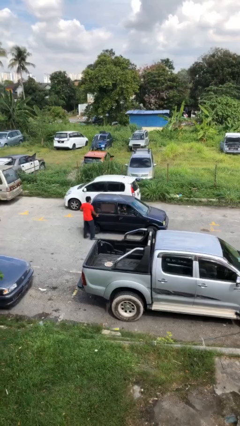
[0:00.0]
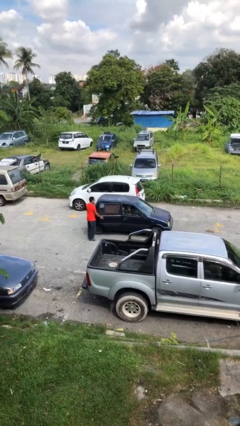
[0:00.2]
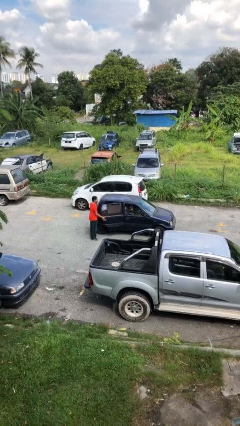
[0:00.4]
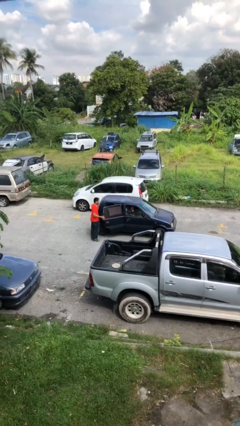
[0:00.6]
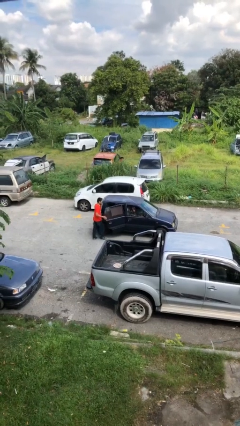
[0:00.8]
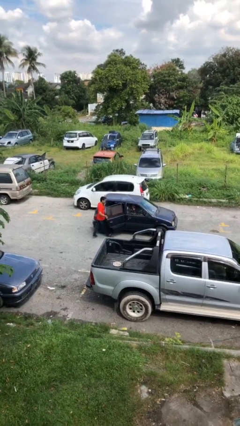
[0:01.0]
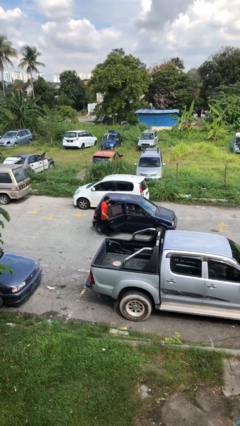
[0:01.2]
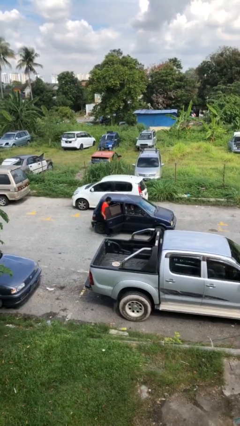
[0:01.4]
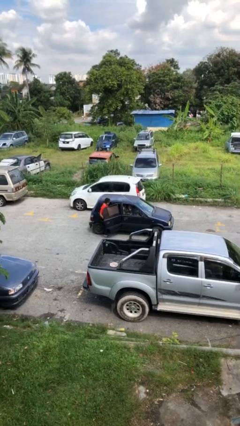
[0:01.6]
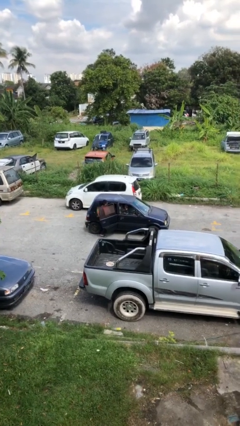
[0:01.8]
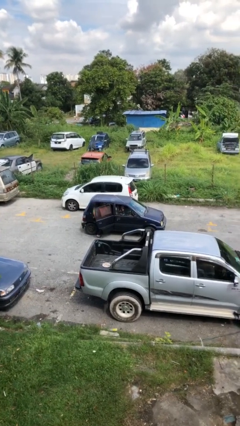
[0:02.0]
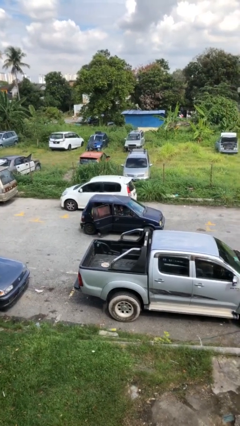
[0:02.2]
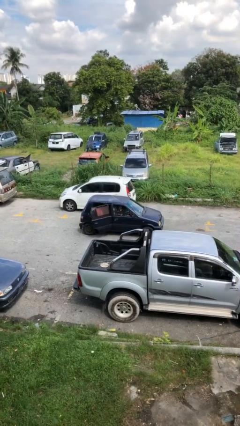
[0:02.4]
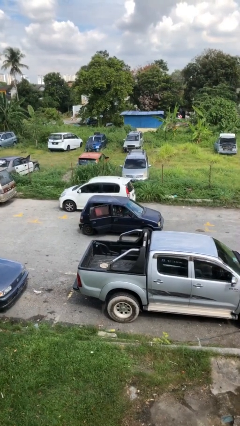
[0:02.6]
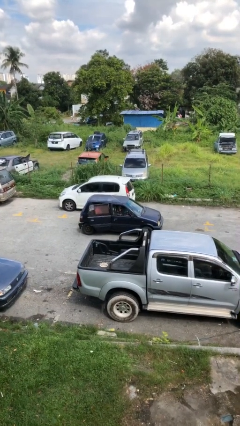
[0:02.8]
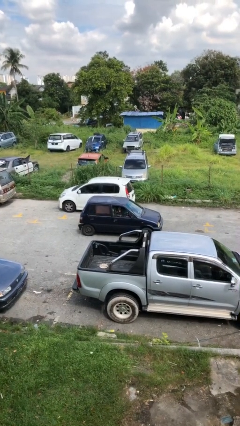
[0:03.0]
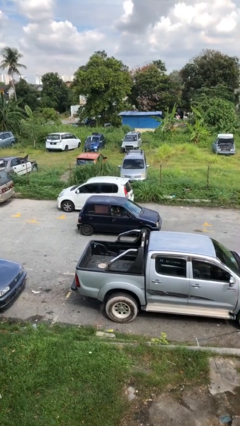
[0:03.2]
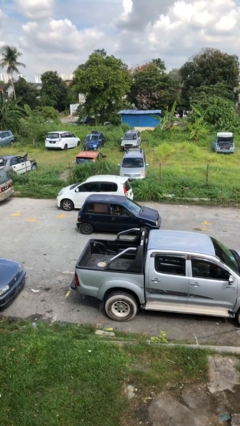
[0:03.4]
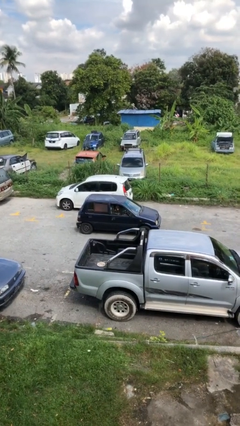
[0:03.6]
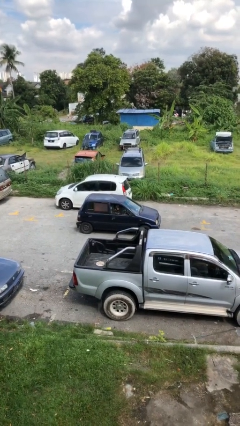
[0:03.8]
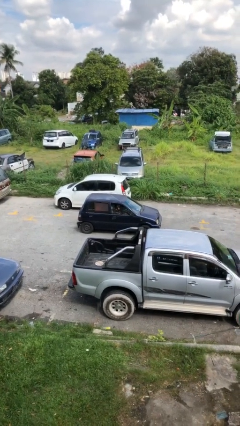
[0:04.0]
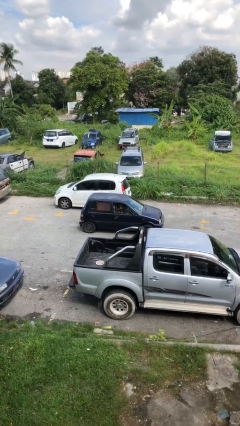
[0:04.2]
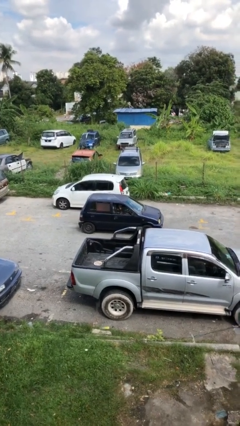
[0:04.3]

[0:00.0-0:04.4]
car picks up person

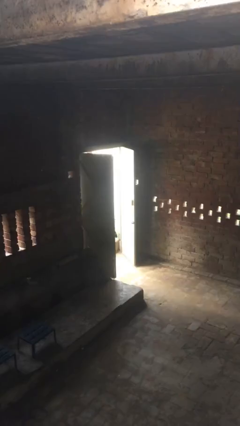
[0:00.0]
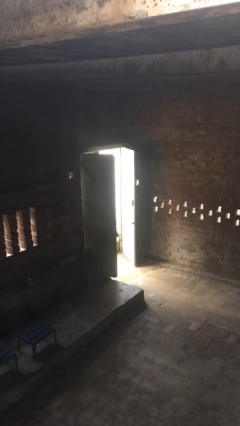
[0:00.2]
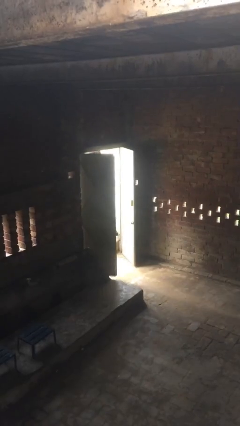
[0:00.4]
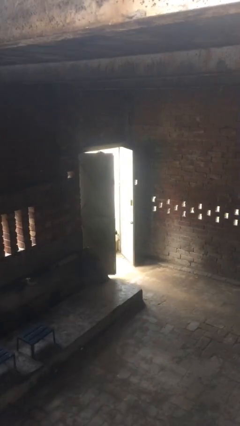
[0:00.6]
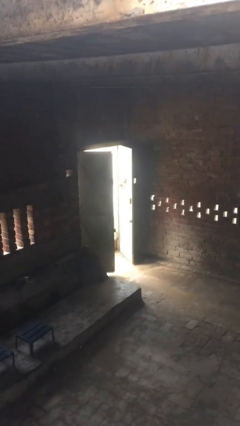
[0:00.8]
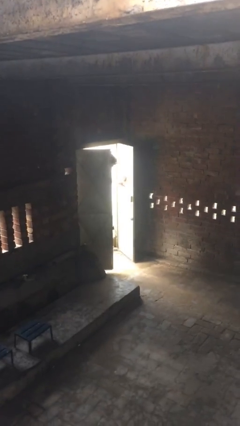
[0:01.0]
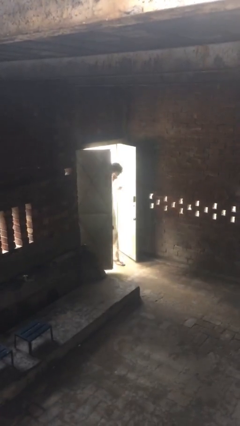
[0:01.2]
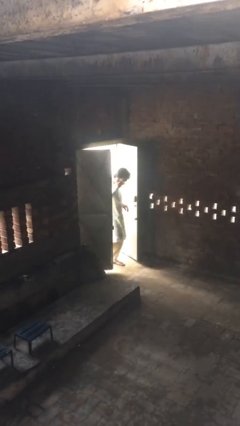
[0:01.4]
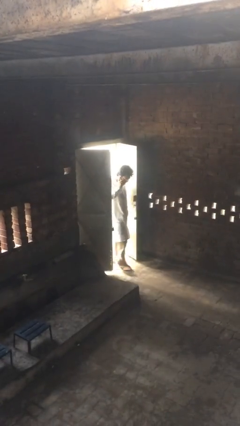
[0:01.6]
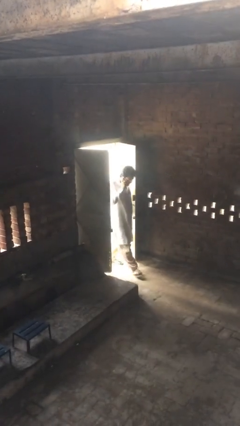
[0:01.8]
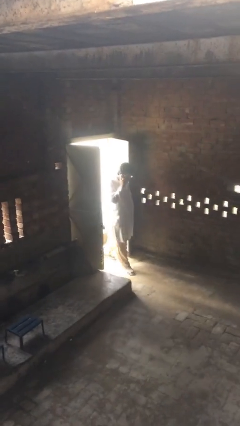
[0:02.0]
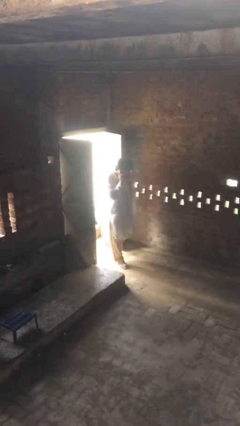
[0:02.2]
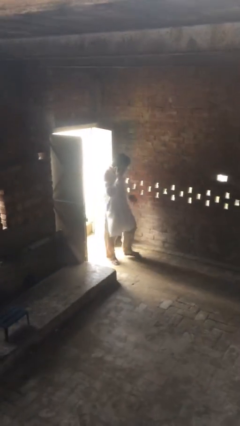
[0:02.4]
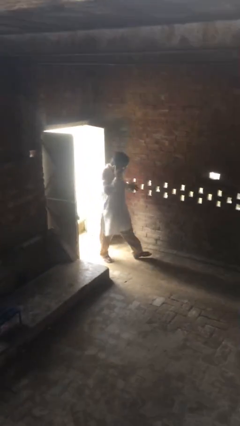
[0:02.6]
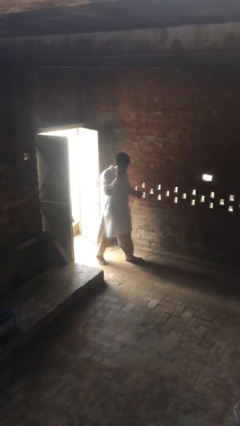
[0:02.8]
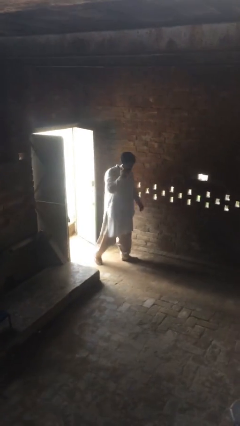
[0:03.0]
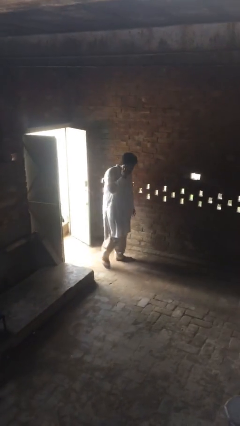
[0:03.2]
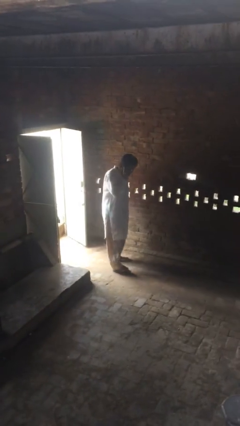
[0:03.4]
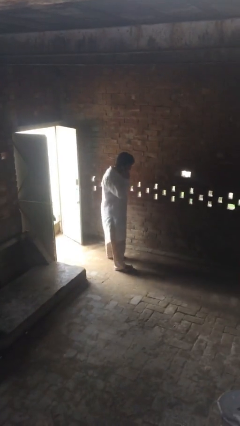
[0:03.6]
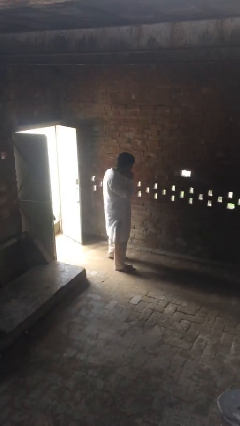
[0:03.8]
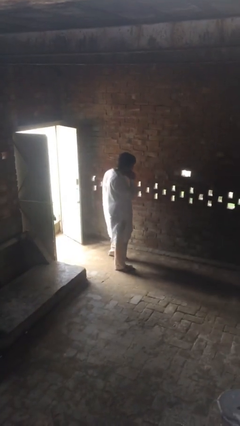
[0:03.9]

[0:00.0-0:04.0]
person enters scene through structure

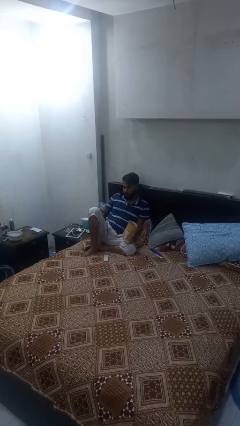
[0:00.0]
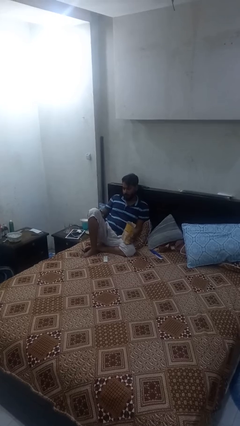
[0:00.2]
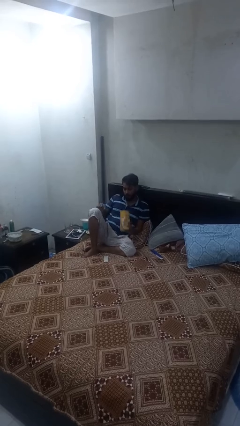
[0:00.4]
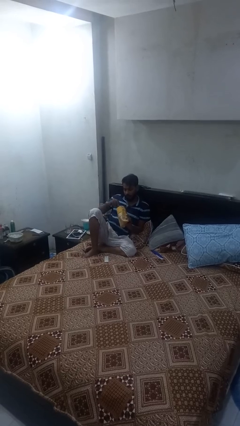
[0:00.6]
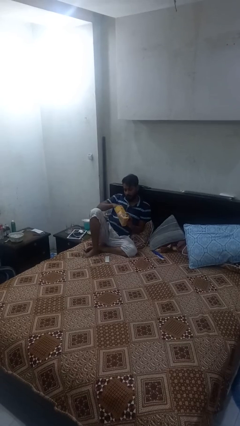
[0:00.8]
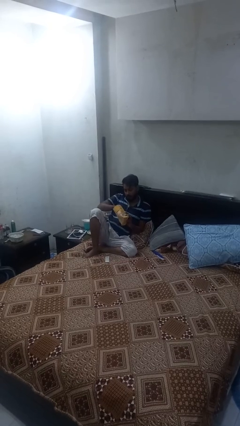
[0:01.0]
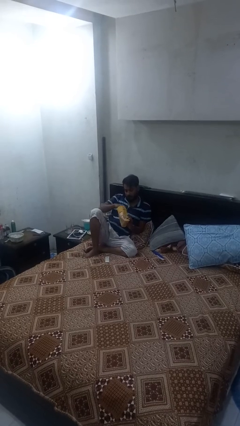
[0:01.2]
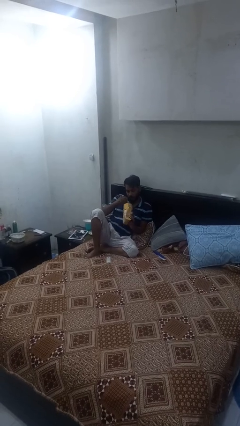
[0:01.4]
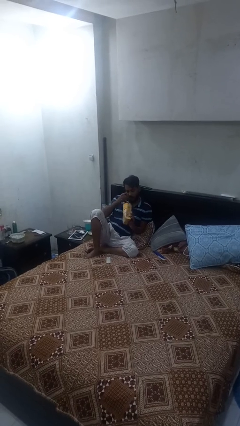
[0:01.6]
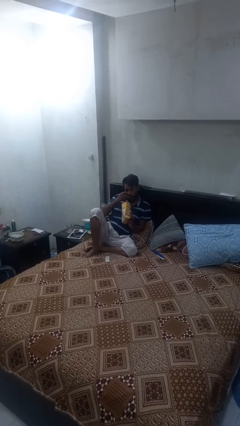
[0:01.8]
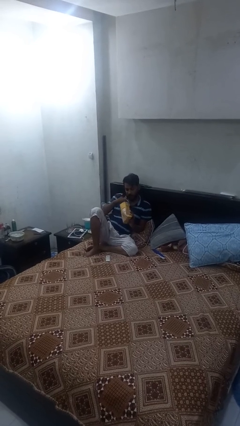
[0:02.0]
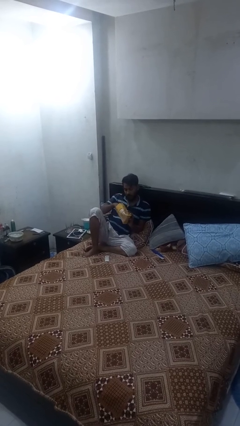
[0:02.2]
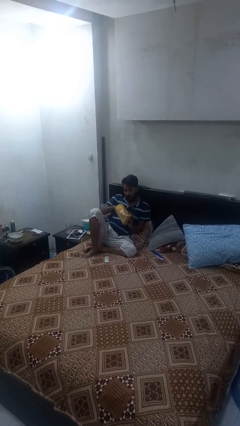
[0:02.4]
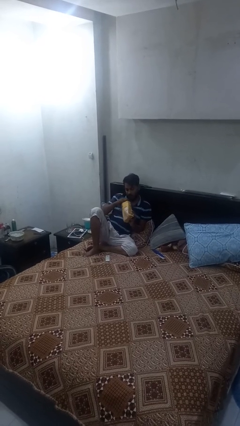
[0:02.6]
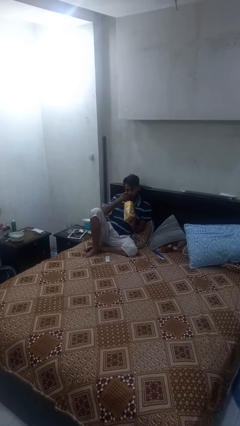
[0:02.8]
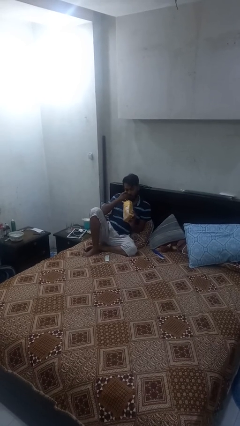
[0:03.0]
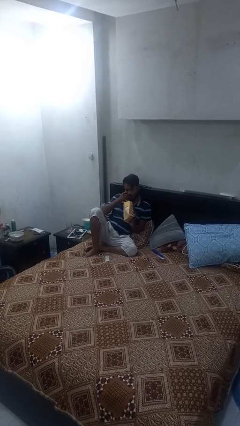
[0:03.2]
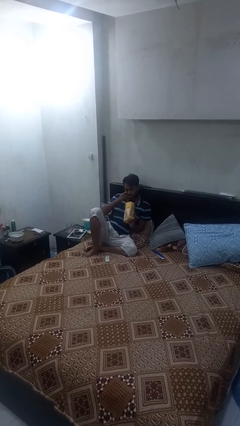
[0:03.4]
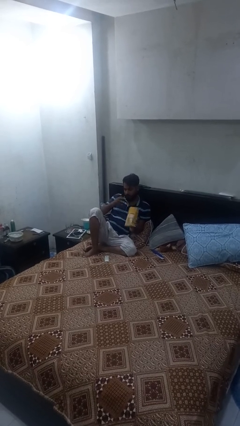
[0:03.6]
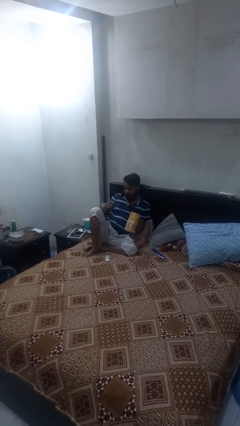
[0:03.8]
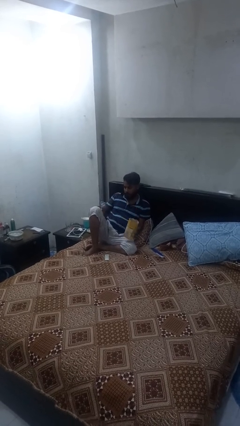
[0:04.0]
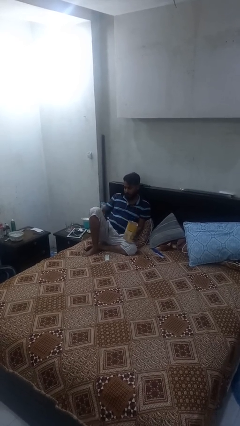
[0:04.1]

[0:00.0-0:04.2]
person eats snack from bag

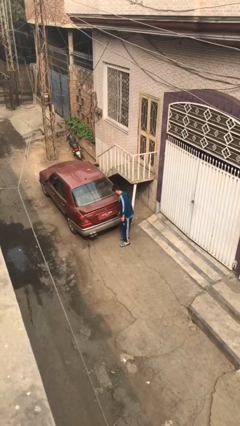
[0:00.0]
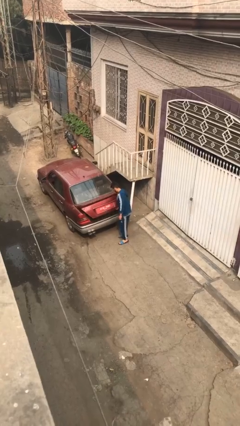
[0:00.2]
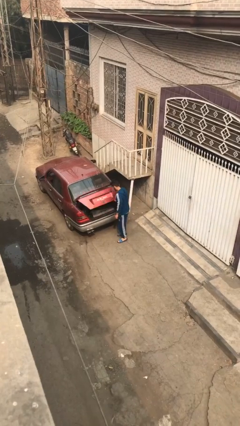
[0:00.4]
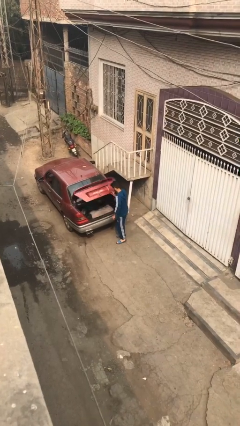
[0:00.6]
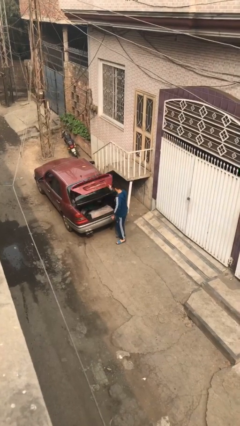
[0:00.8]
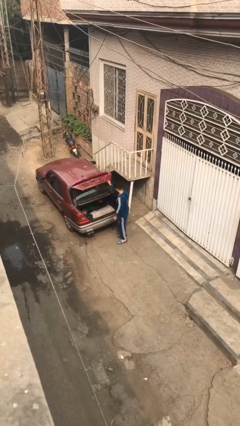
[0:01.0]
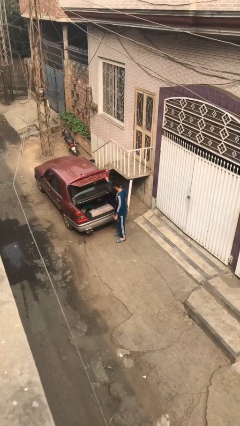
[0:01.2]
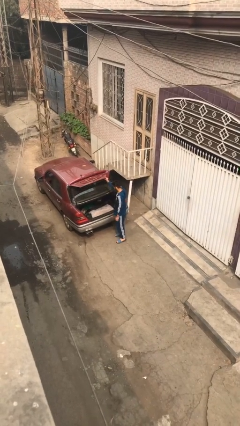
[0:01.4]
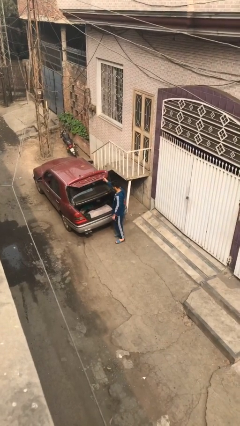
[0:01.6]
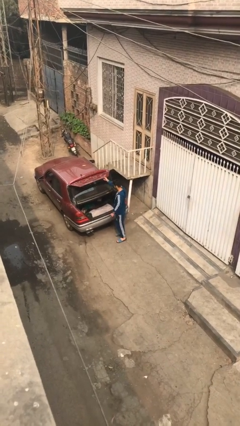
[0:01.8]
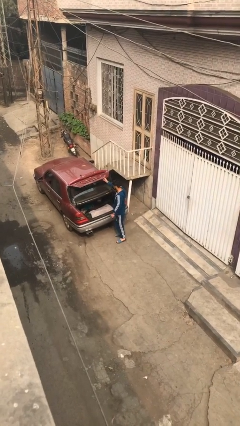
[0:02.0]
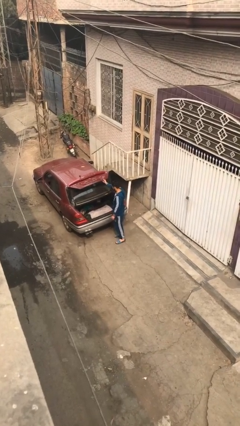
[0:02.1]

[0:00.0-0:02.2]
person opens car trunk

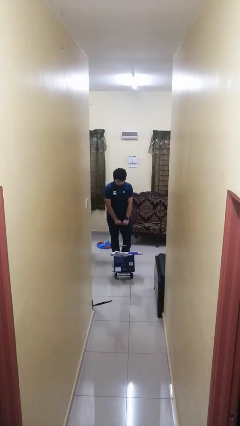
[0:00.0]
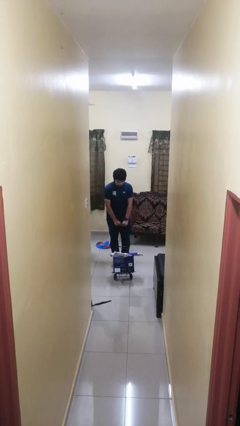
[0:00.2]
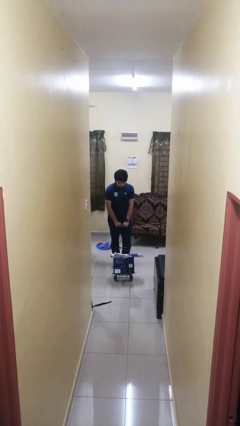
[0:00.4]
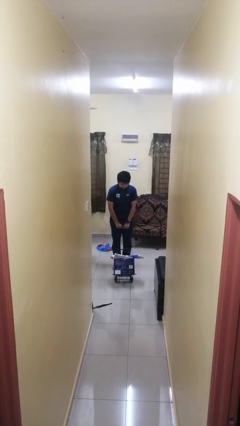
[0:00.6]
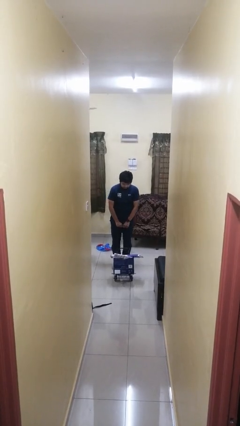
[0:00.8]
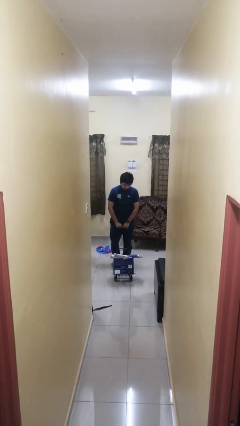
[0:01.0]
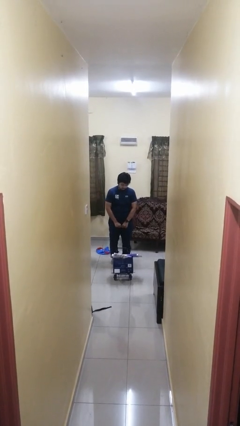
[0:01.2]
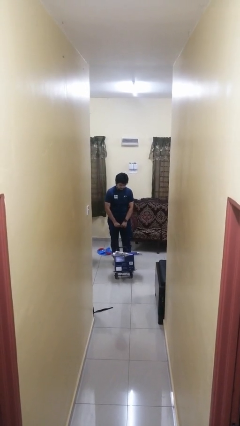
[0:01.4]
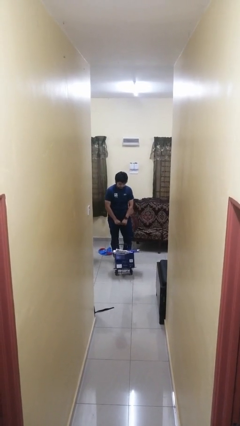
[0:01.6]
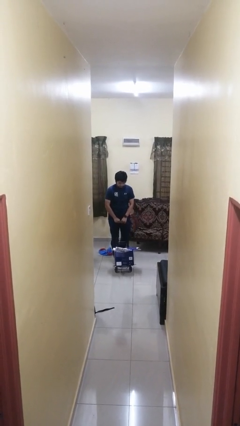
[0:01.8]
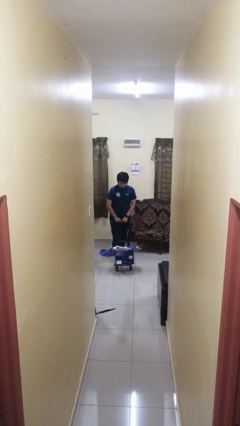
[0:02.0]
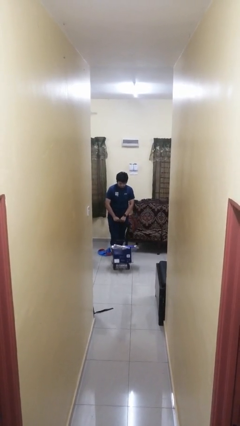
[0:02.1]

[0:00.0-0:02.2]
person pulls wheeled cart

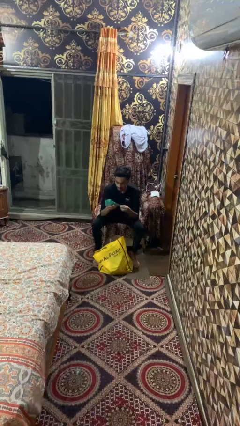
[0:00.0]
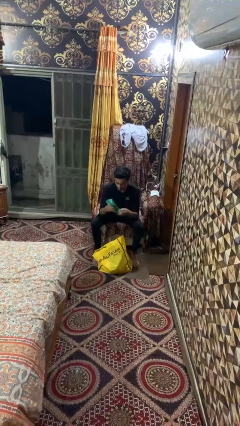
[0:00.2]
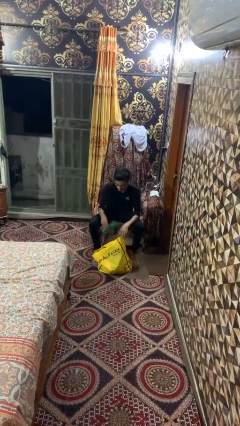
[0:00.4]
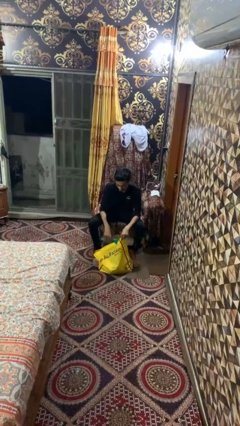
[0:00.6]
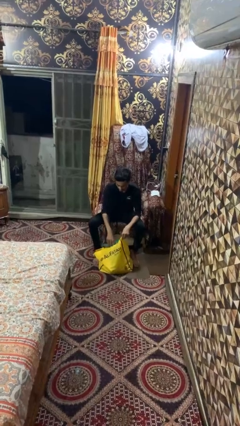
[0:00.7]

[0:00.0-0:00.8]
person puts object into bag
